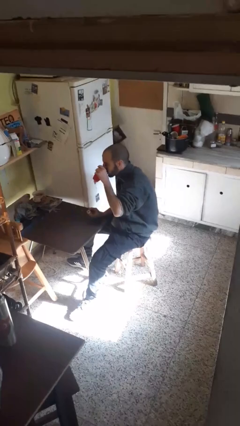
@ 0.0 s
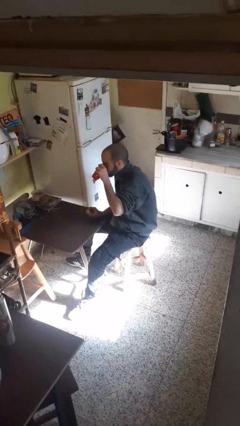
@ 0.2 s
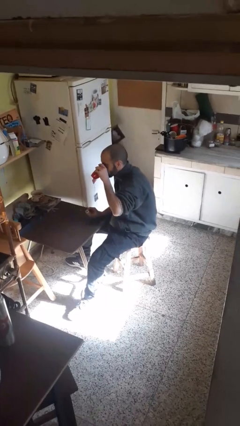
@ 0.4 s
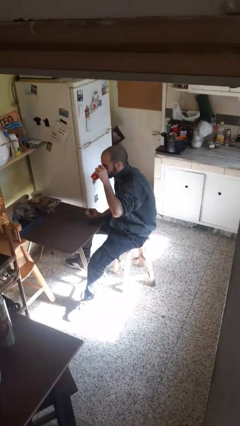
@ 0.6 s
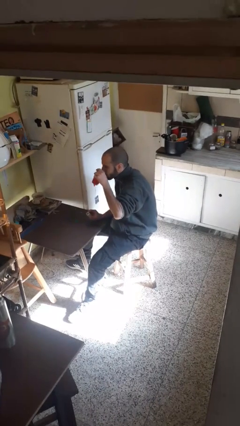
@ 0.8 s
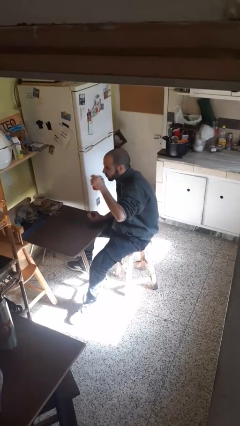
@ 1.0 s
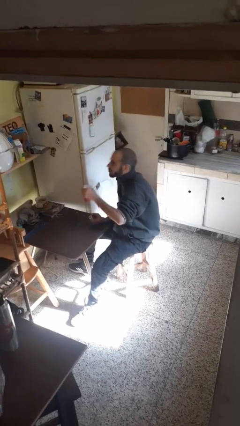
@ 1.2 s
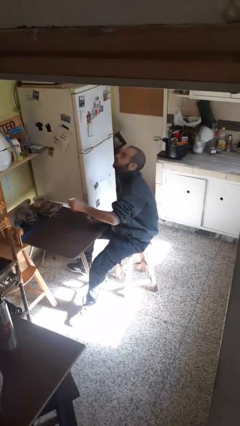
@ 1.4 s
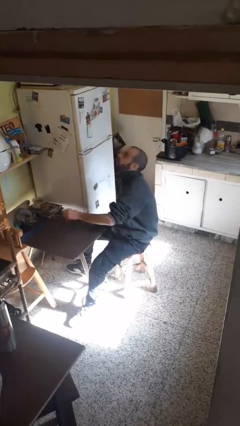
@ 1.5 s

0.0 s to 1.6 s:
person drinks from cup

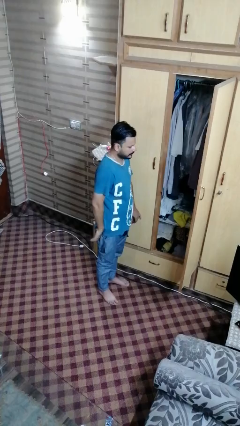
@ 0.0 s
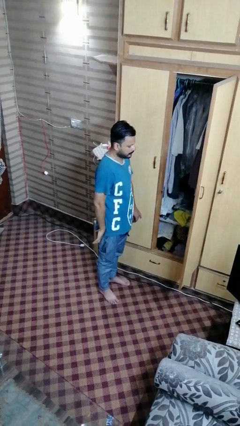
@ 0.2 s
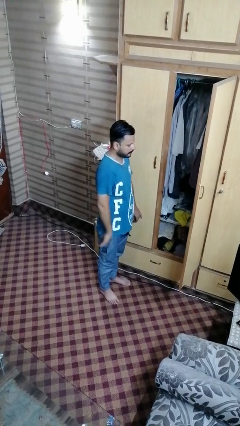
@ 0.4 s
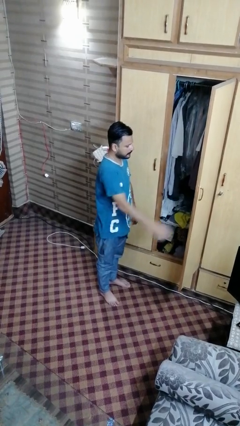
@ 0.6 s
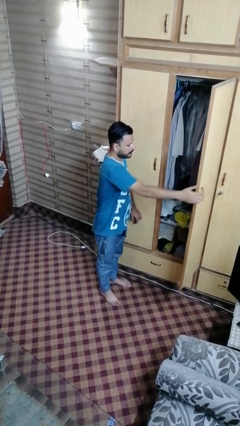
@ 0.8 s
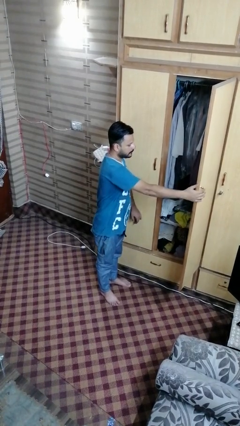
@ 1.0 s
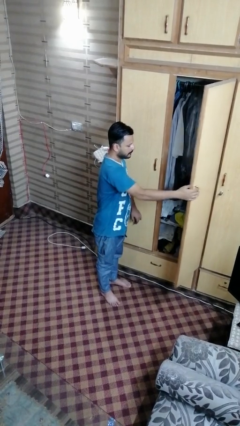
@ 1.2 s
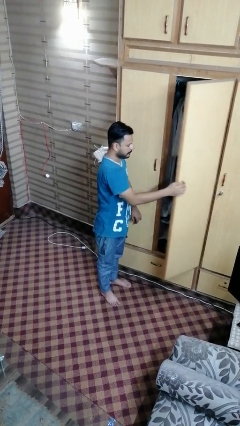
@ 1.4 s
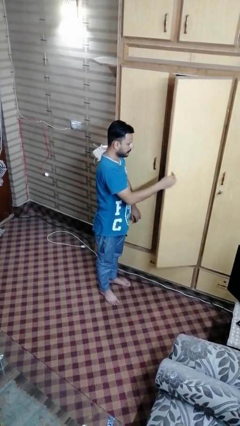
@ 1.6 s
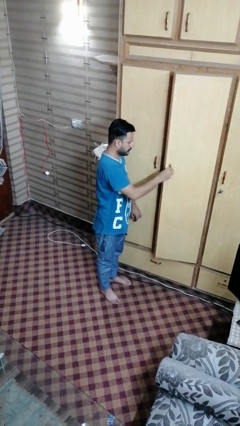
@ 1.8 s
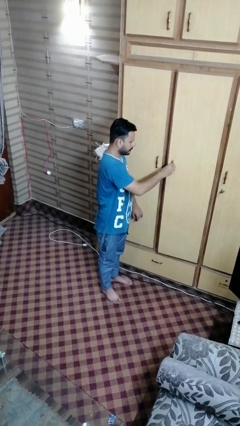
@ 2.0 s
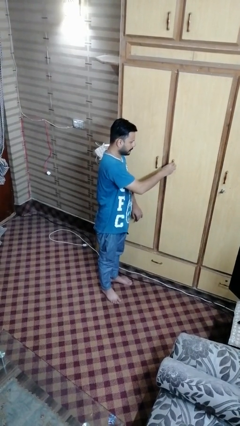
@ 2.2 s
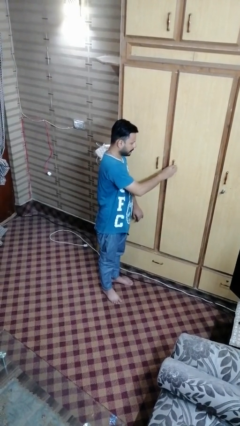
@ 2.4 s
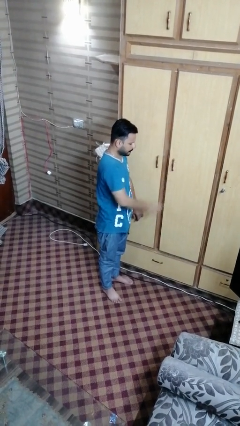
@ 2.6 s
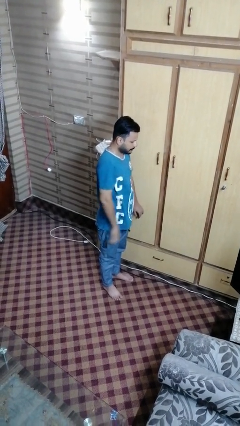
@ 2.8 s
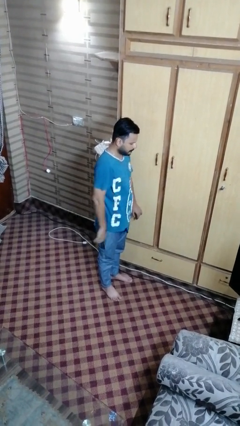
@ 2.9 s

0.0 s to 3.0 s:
person closes closet door

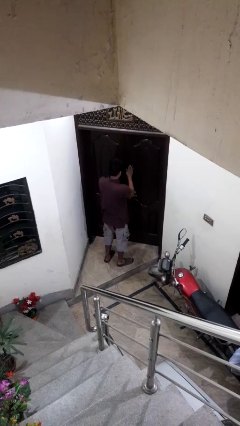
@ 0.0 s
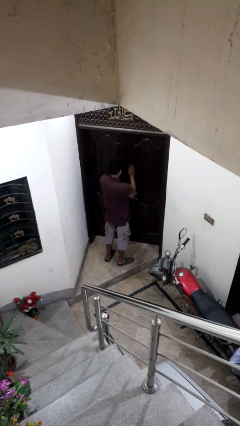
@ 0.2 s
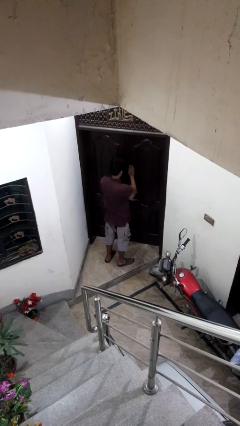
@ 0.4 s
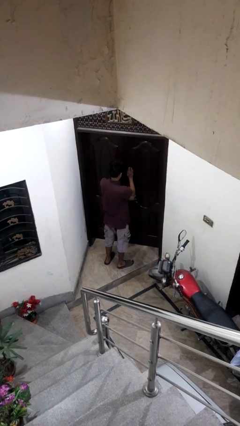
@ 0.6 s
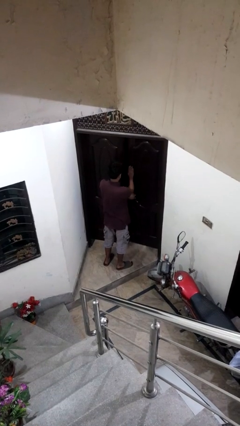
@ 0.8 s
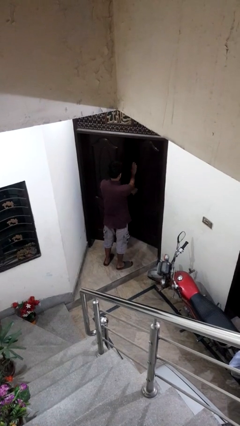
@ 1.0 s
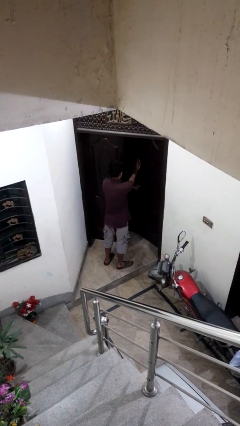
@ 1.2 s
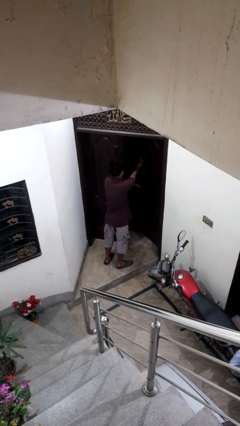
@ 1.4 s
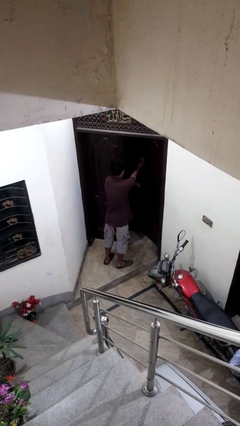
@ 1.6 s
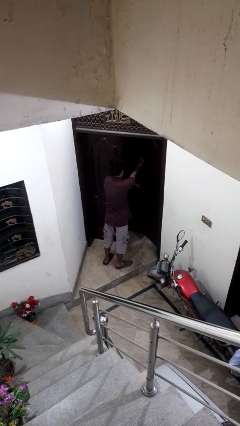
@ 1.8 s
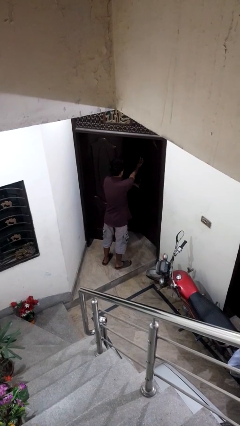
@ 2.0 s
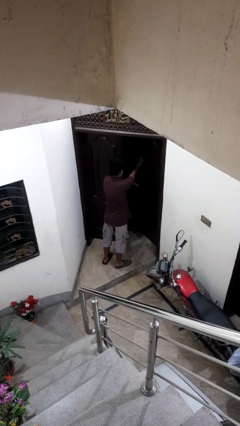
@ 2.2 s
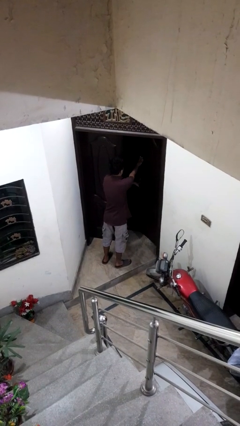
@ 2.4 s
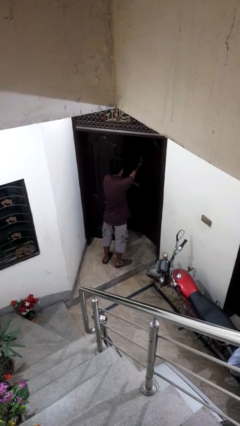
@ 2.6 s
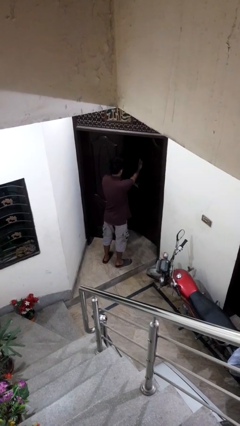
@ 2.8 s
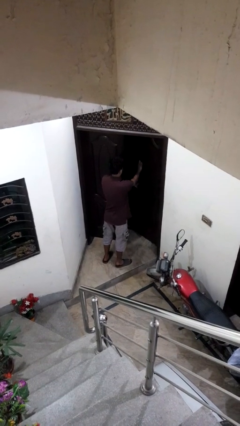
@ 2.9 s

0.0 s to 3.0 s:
person opens facility door

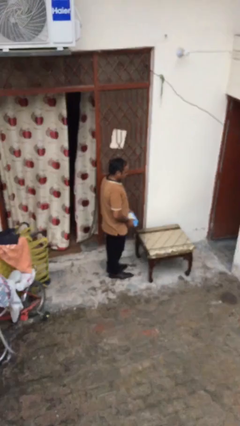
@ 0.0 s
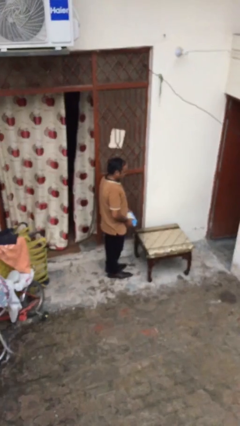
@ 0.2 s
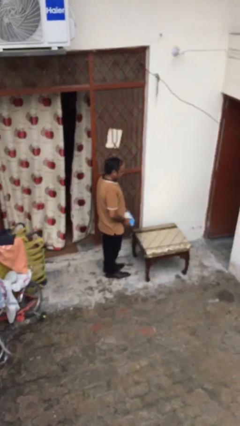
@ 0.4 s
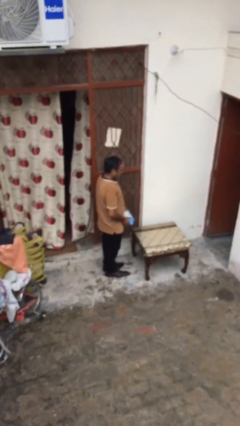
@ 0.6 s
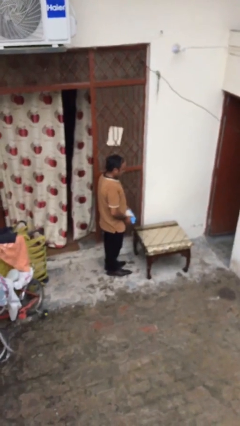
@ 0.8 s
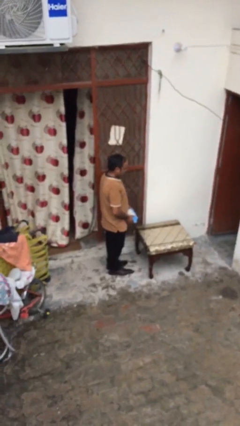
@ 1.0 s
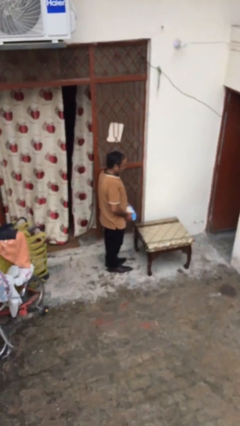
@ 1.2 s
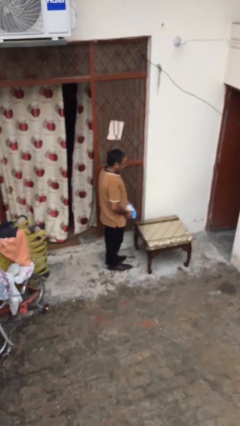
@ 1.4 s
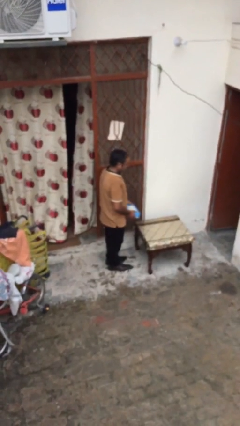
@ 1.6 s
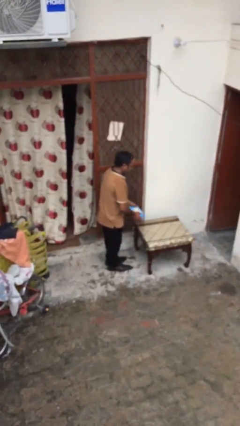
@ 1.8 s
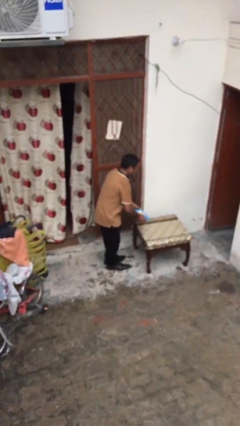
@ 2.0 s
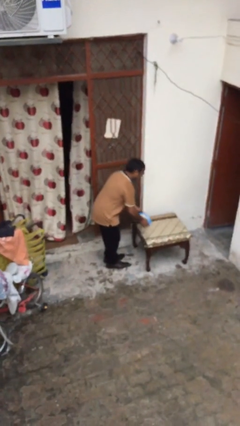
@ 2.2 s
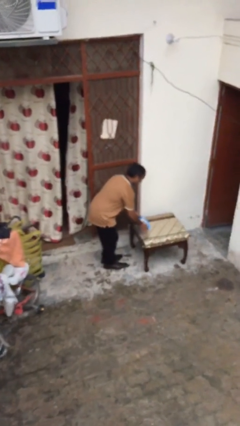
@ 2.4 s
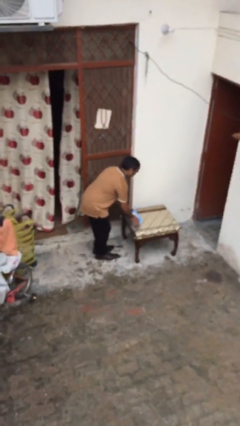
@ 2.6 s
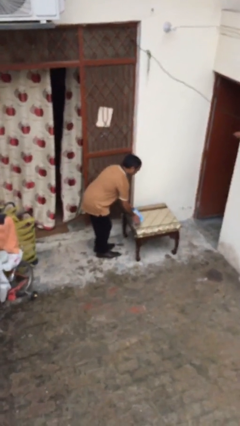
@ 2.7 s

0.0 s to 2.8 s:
person puts down object on table

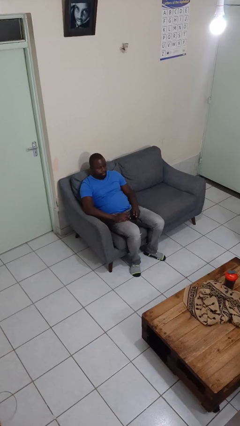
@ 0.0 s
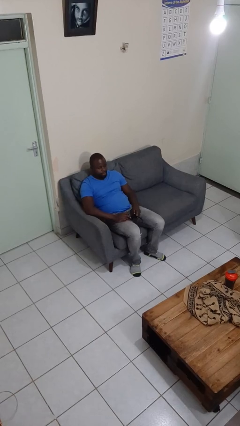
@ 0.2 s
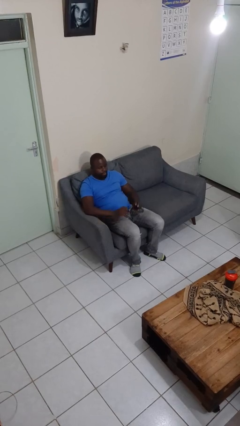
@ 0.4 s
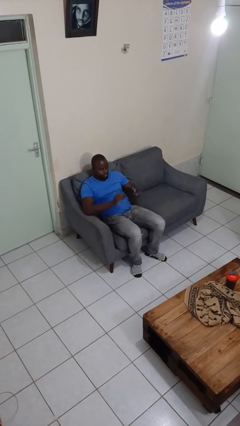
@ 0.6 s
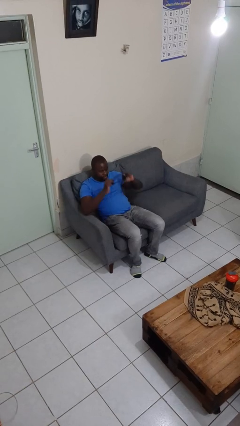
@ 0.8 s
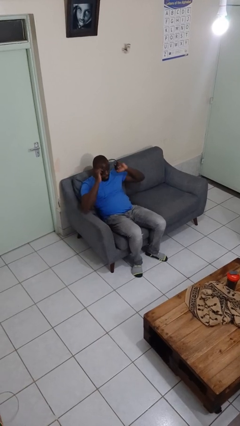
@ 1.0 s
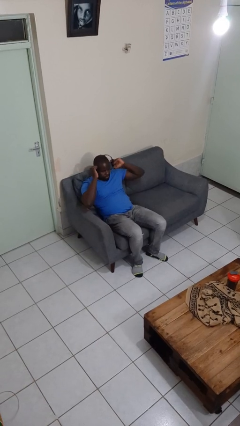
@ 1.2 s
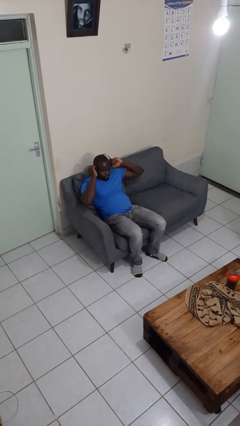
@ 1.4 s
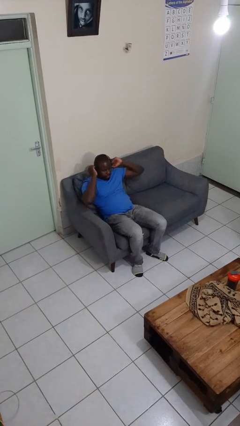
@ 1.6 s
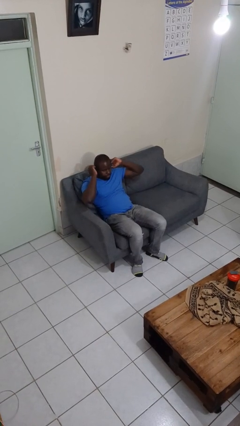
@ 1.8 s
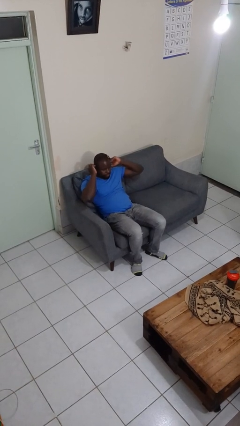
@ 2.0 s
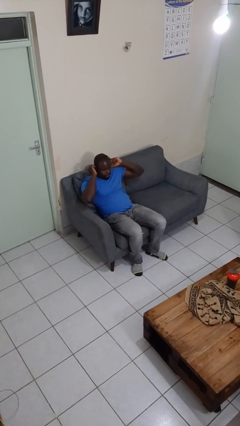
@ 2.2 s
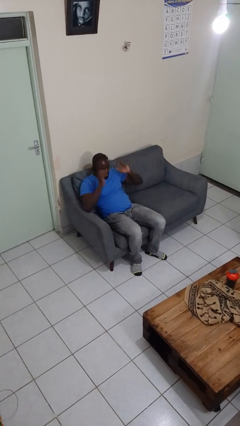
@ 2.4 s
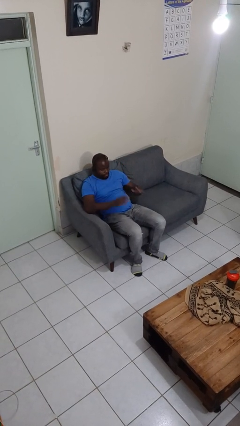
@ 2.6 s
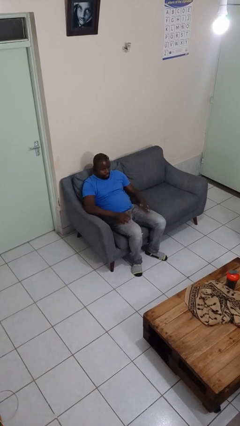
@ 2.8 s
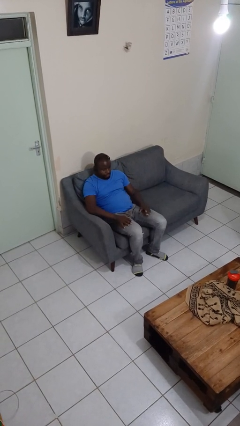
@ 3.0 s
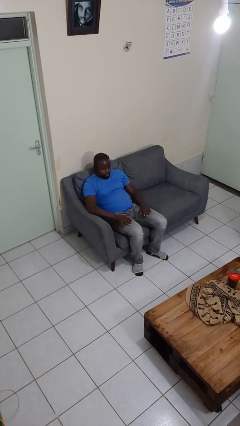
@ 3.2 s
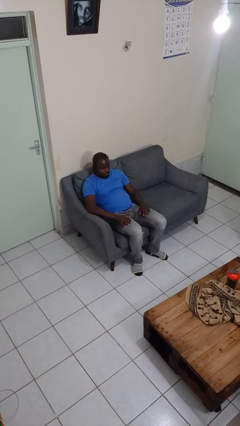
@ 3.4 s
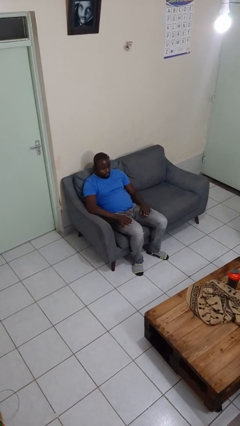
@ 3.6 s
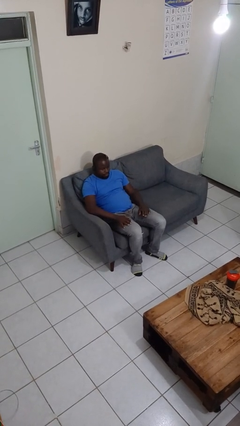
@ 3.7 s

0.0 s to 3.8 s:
person puts on headphones

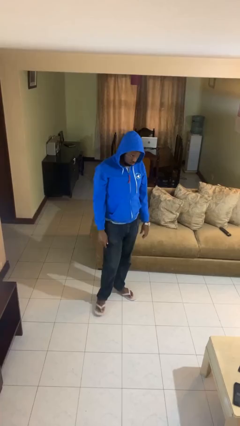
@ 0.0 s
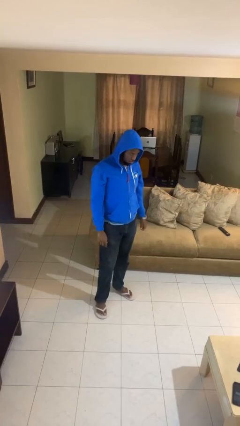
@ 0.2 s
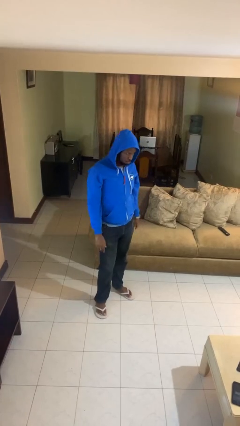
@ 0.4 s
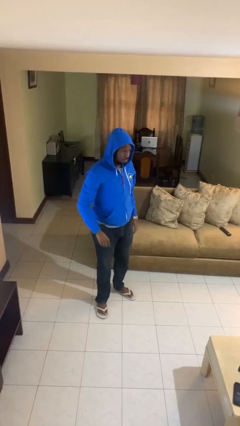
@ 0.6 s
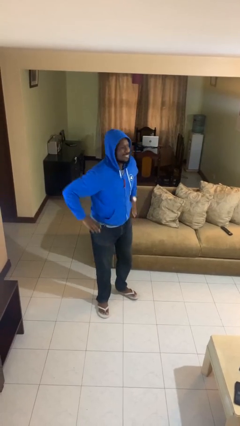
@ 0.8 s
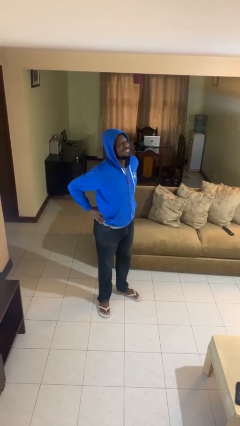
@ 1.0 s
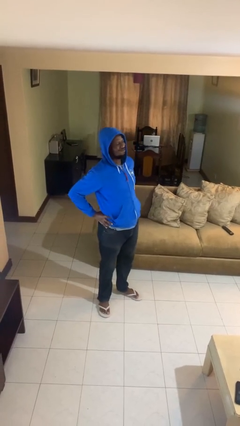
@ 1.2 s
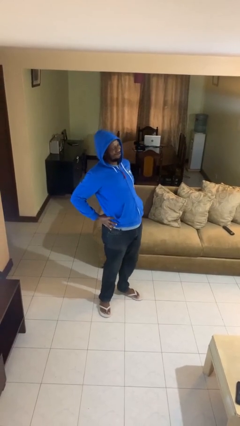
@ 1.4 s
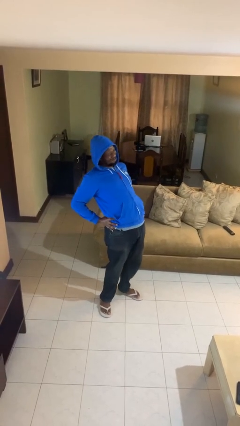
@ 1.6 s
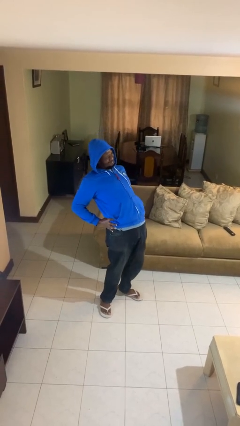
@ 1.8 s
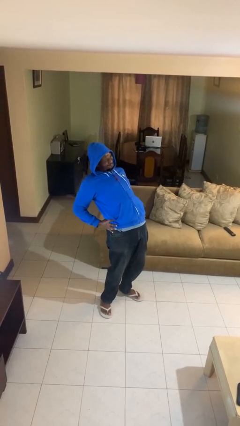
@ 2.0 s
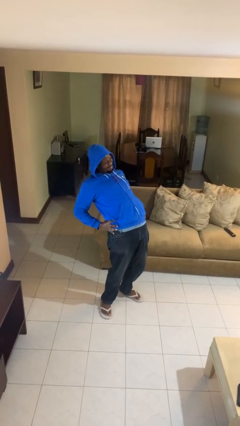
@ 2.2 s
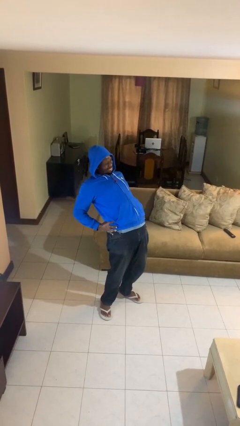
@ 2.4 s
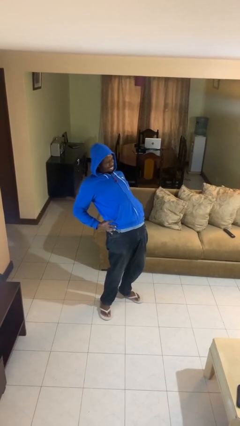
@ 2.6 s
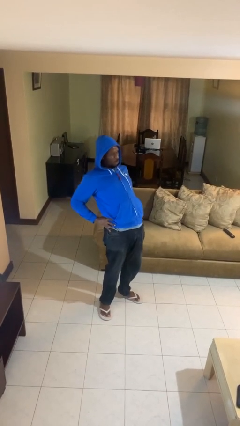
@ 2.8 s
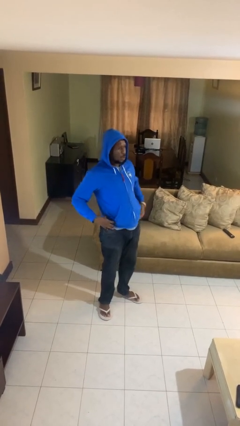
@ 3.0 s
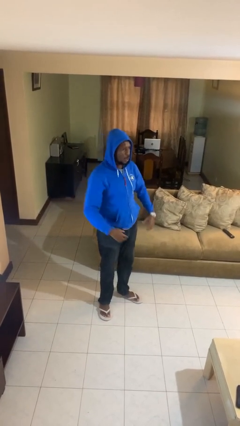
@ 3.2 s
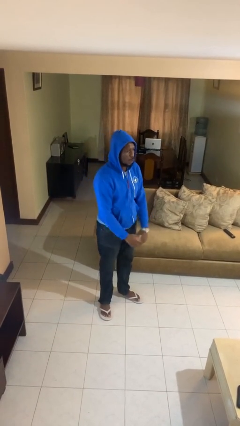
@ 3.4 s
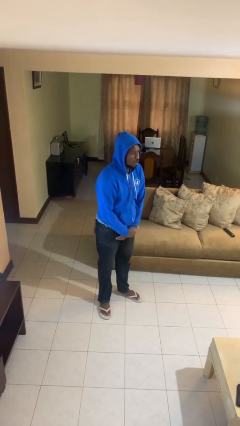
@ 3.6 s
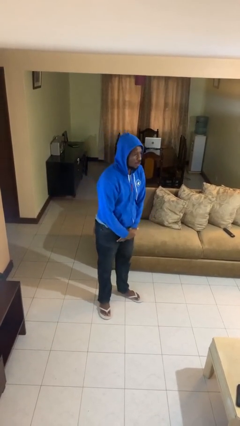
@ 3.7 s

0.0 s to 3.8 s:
person stretches back
